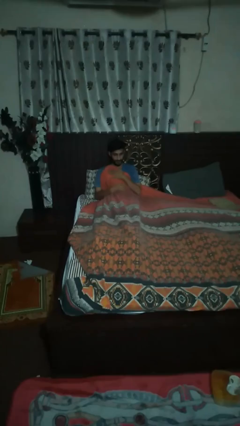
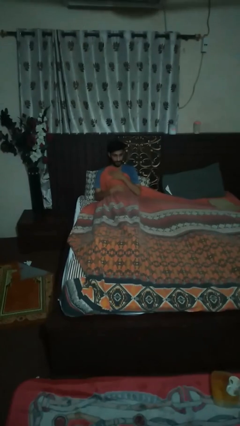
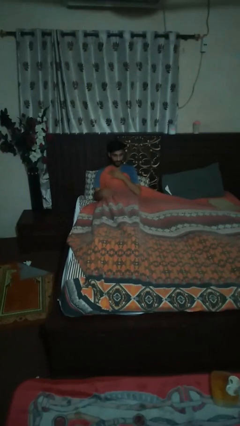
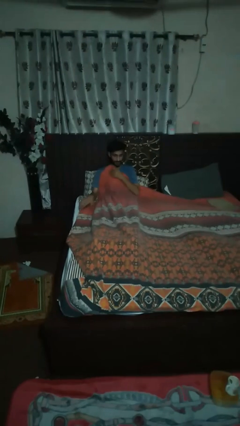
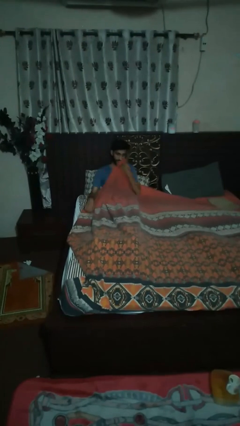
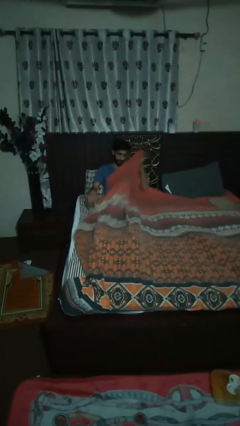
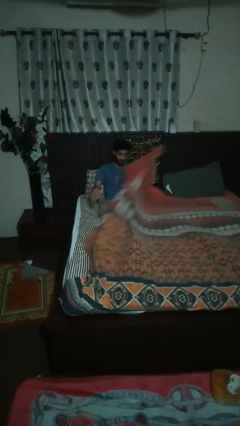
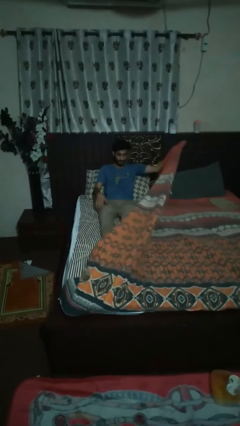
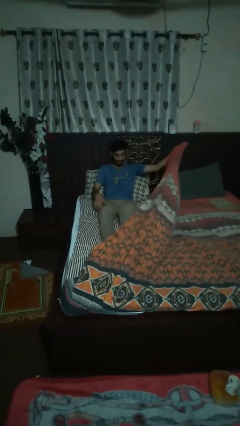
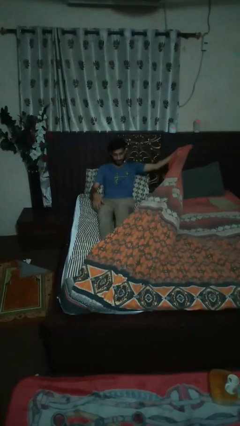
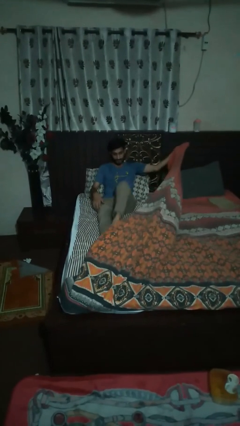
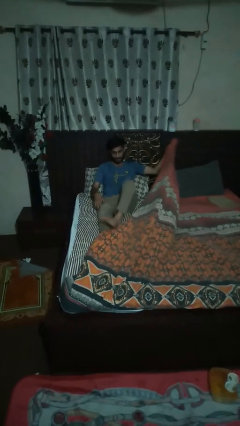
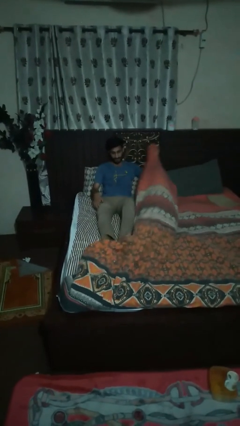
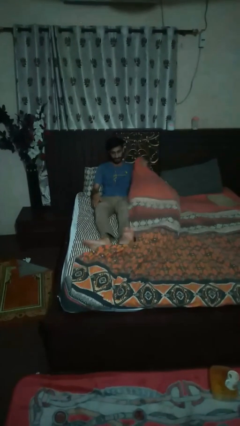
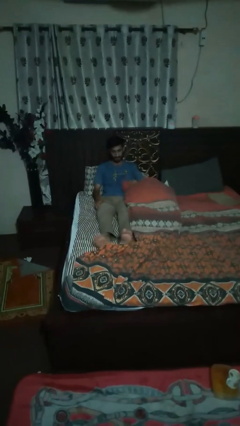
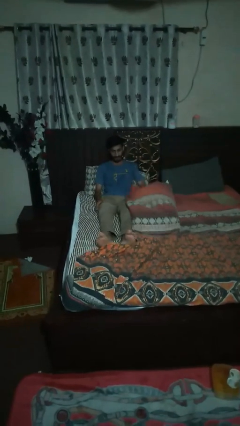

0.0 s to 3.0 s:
person uncovers with bedsheets

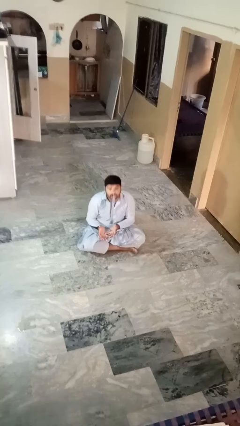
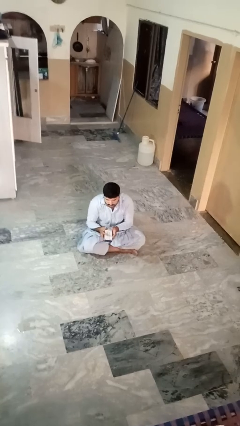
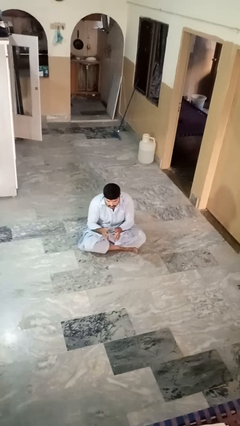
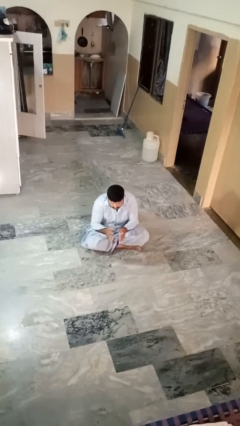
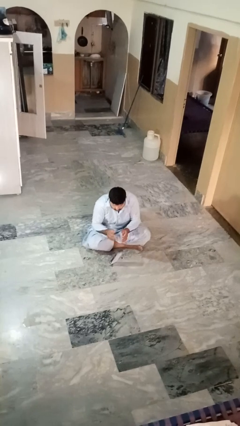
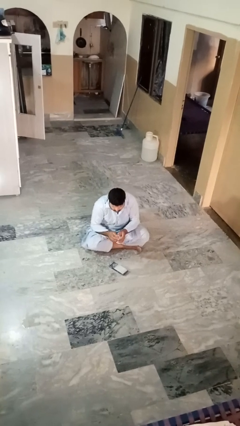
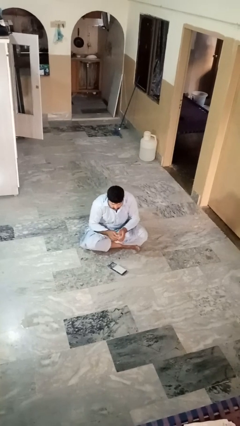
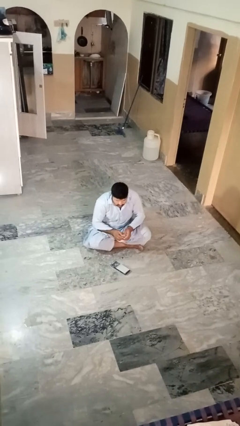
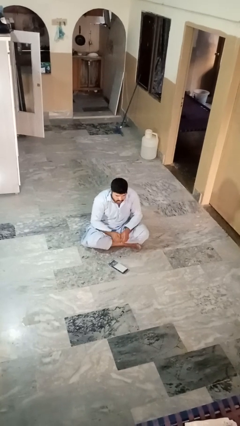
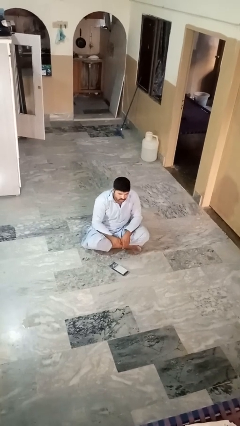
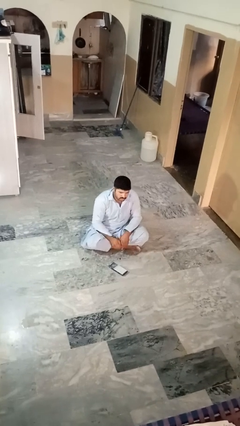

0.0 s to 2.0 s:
person catches dropped object

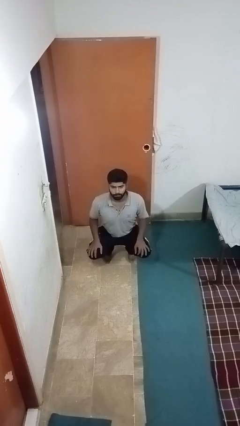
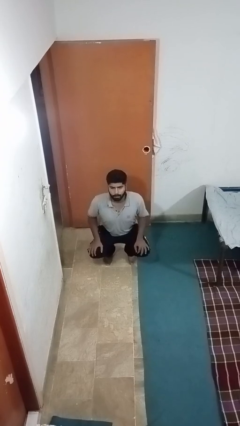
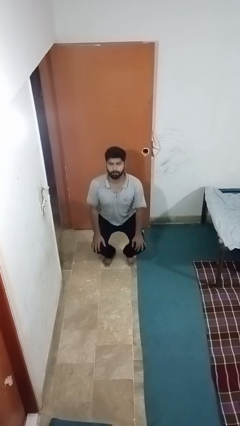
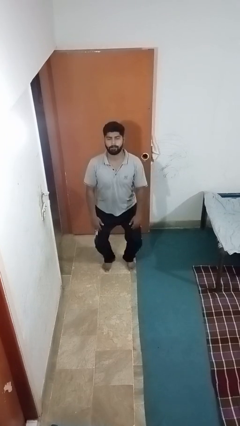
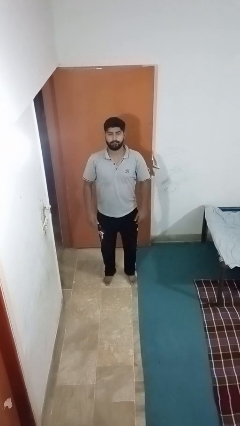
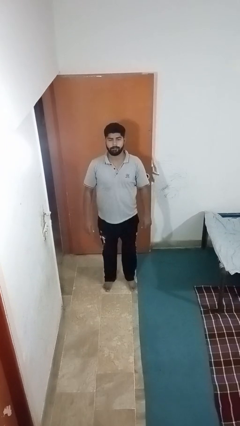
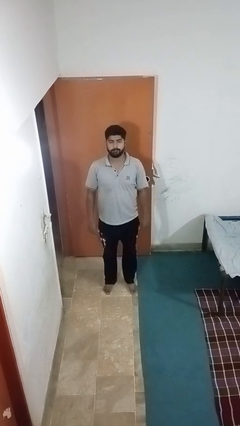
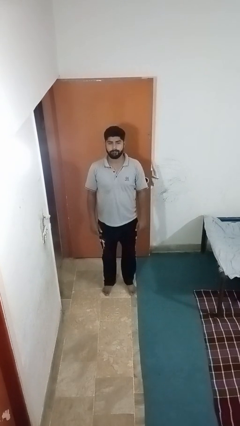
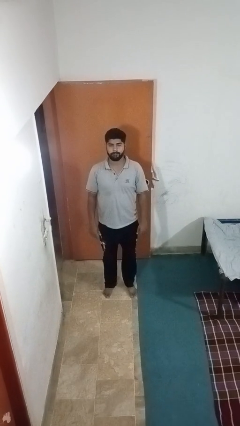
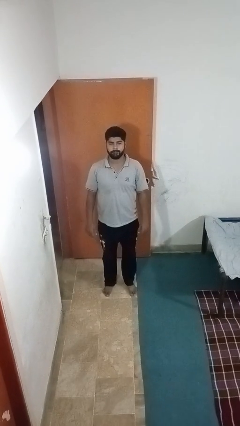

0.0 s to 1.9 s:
person stands up

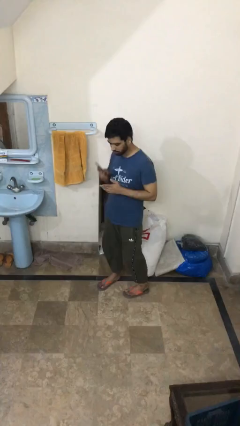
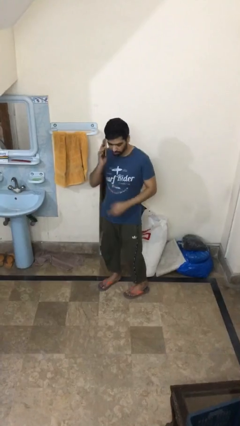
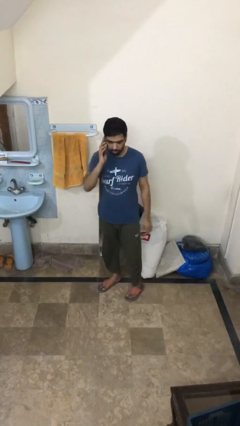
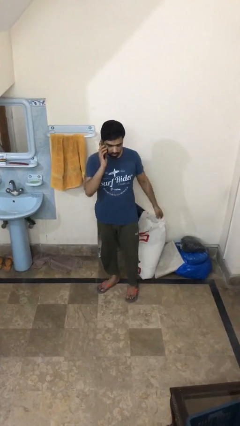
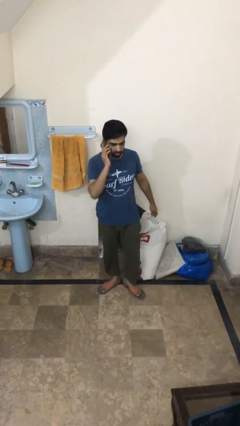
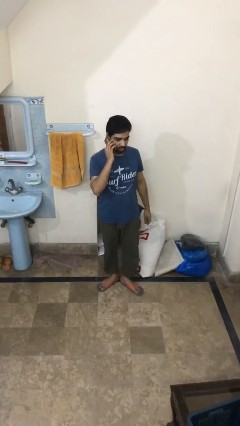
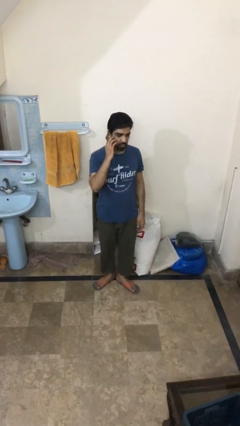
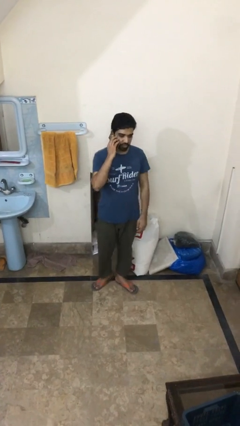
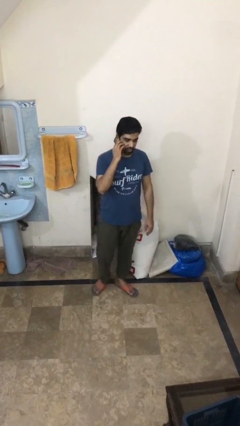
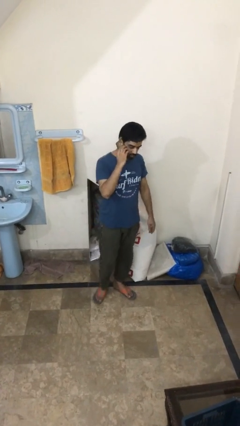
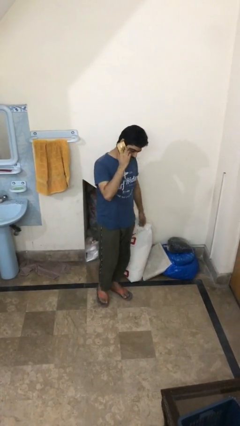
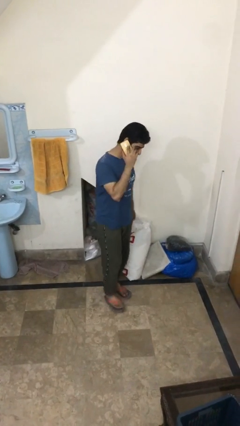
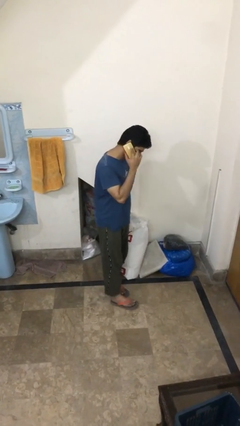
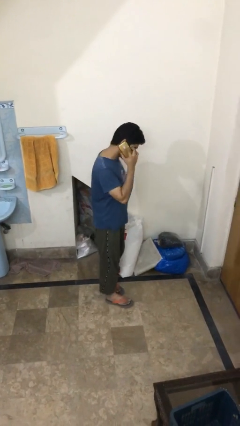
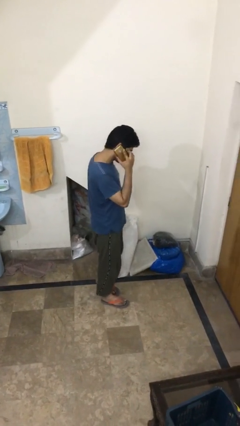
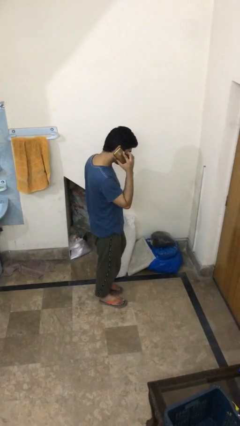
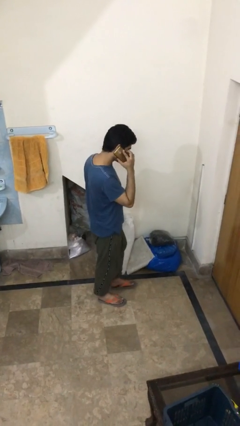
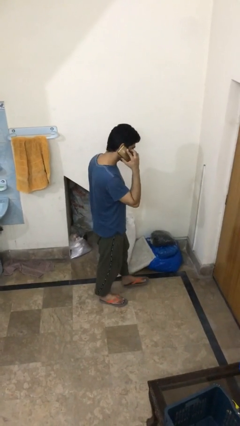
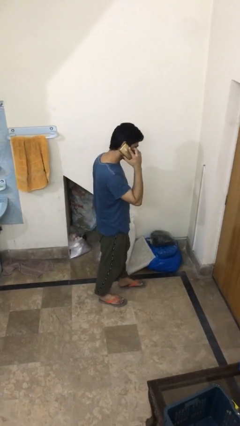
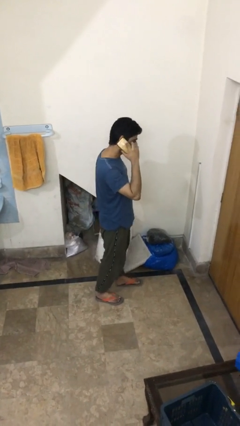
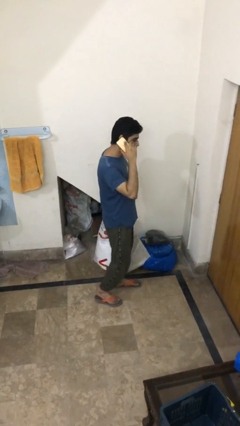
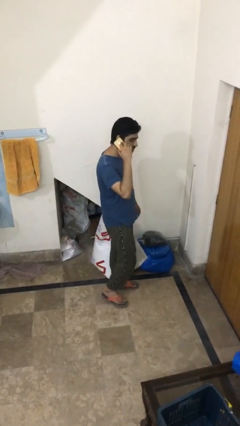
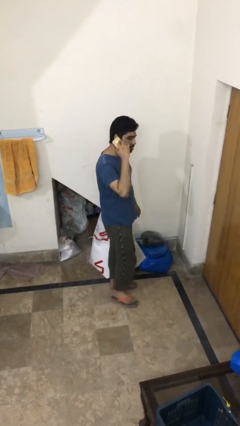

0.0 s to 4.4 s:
person talks on phone

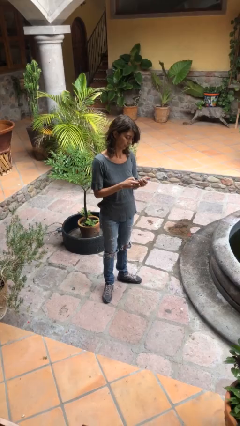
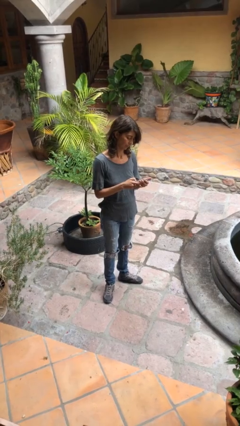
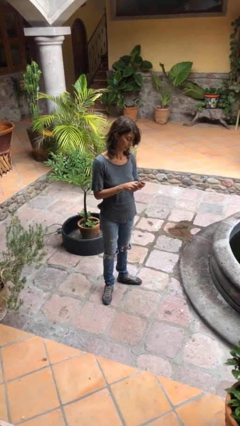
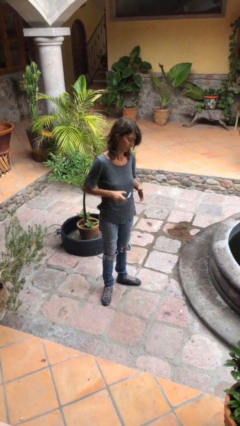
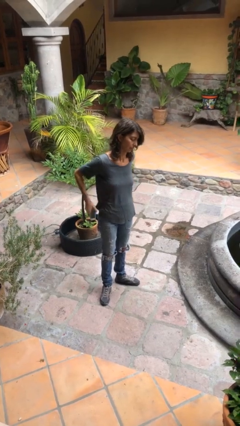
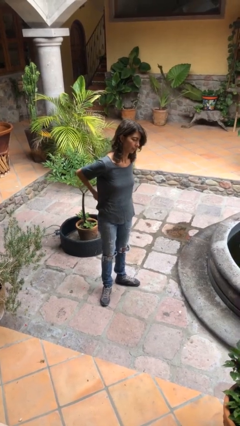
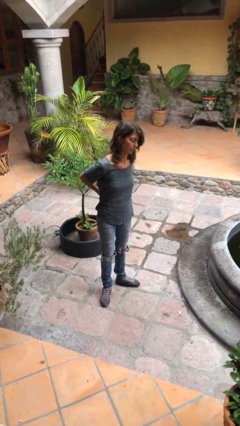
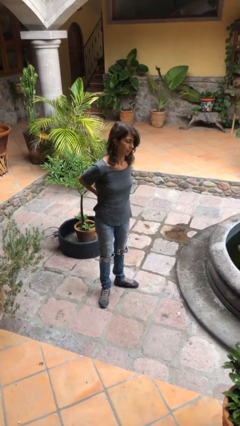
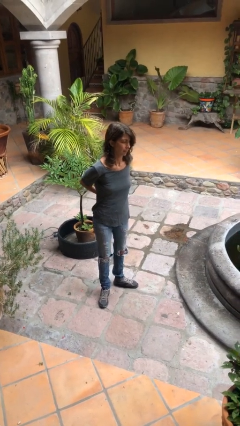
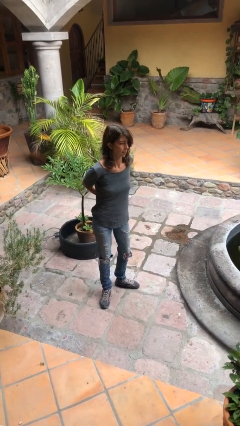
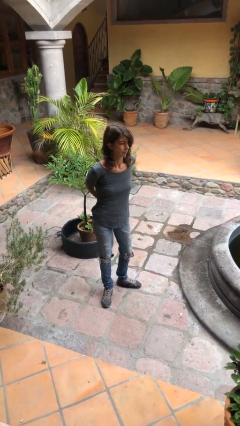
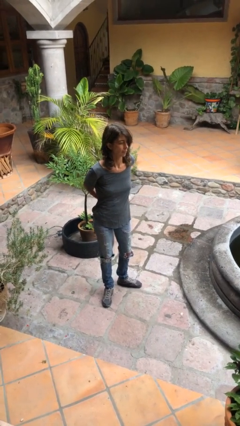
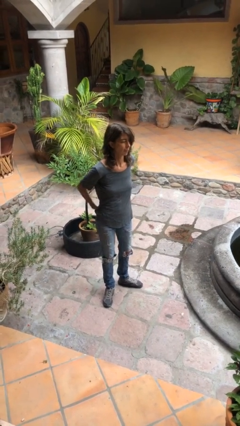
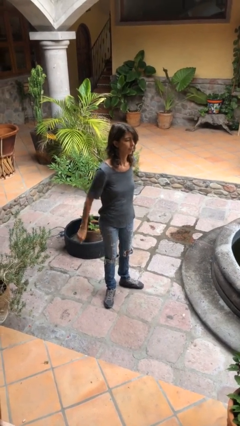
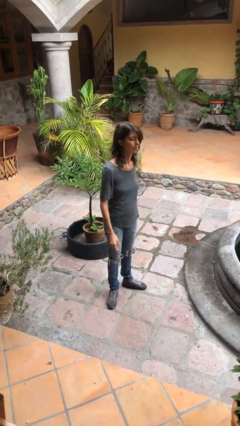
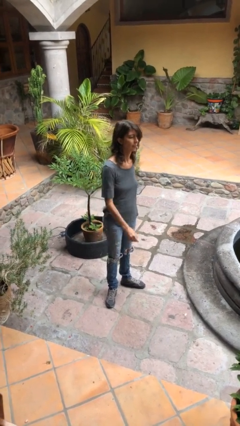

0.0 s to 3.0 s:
person puts phone into pocket

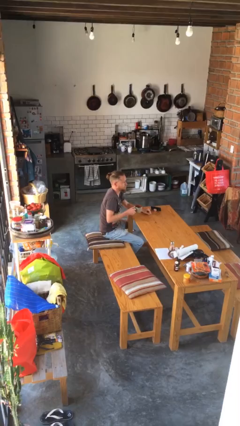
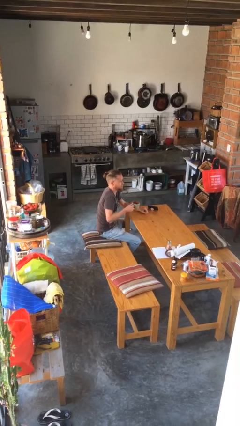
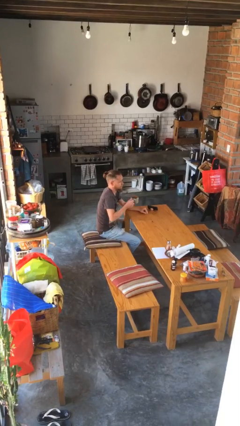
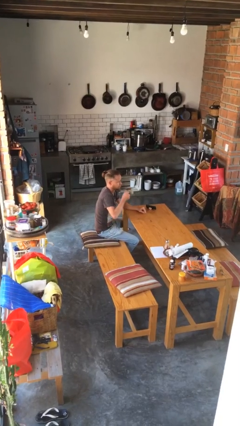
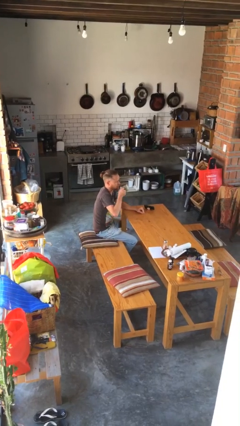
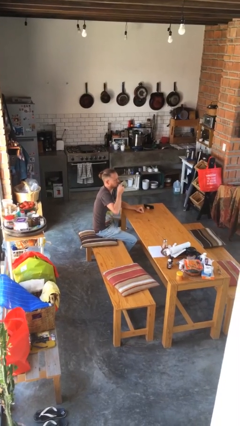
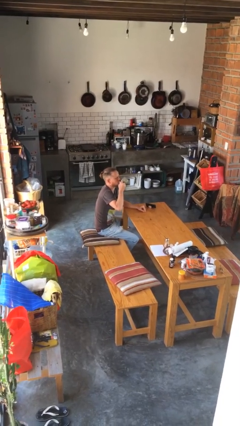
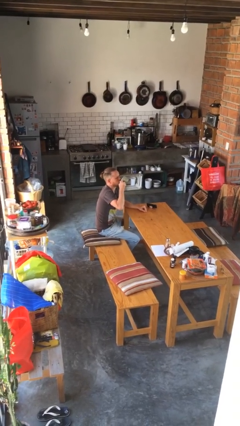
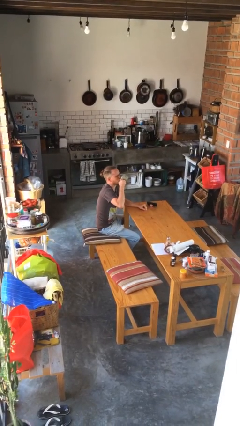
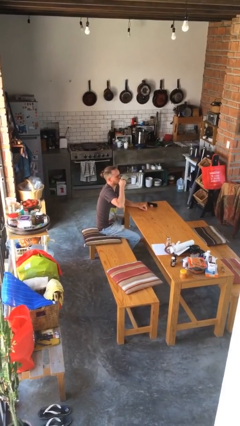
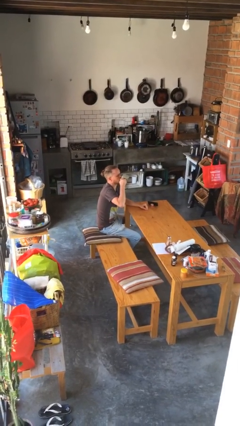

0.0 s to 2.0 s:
person drinks from mug

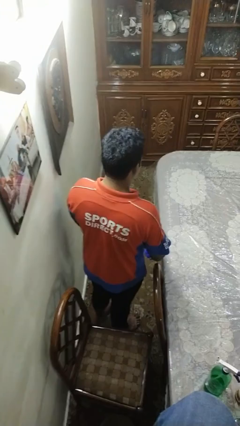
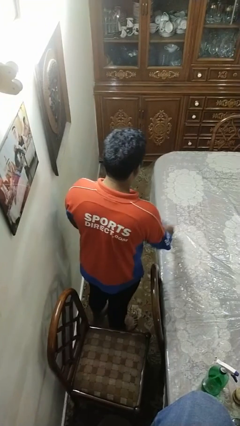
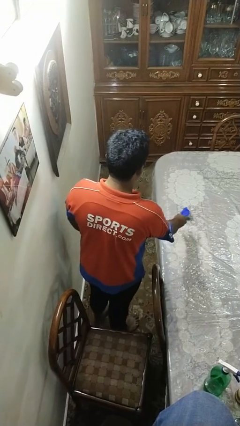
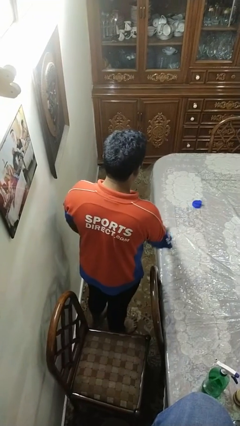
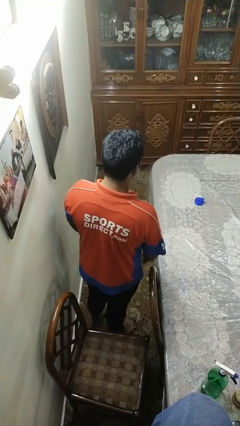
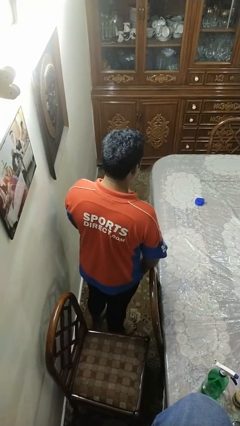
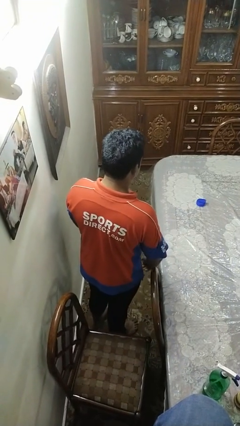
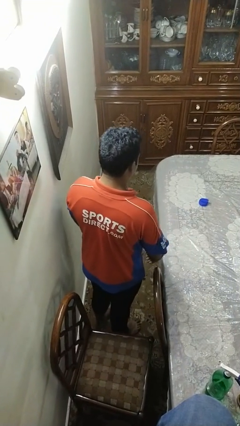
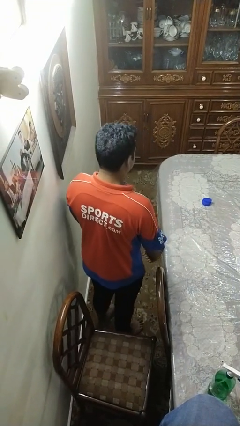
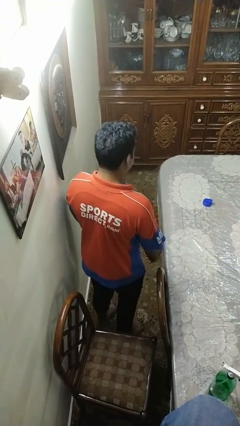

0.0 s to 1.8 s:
person throws object on table
